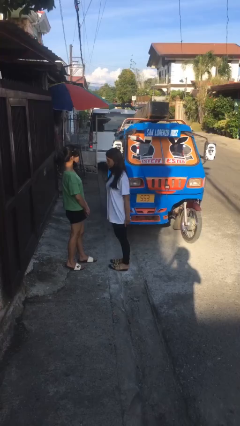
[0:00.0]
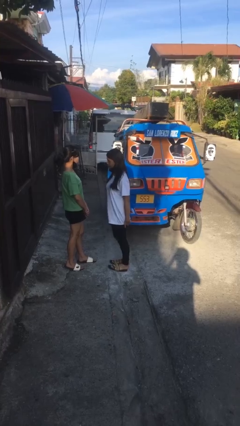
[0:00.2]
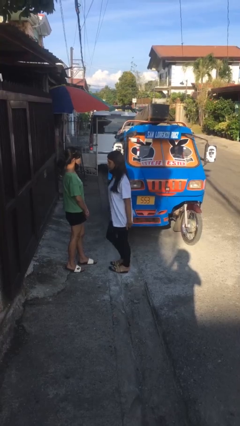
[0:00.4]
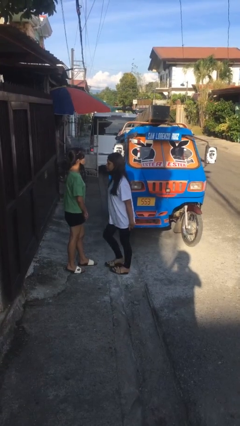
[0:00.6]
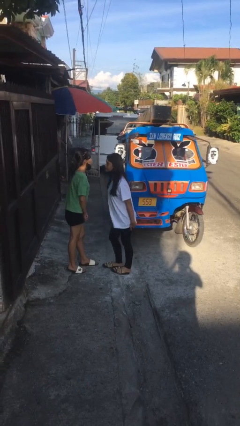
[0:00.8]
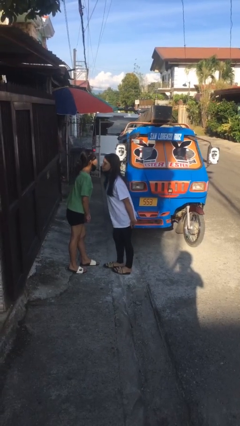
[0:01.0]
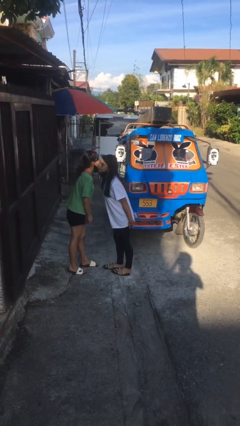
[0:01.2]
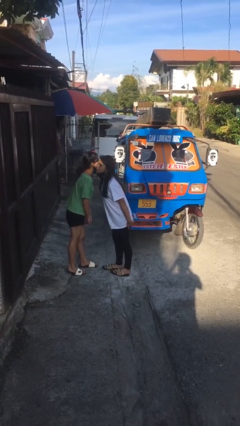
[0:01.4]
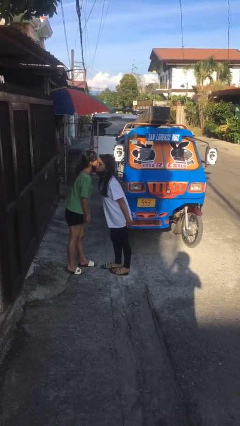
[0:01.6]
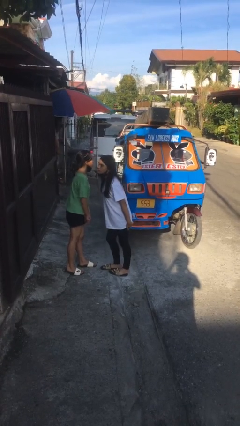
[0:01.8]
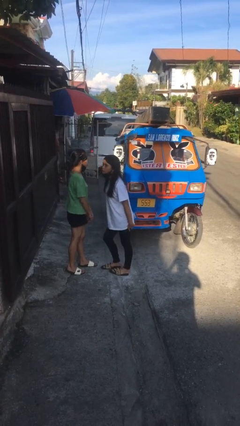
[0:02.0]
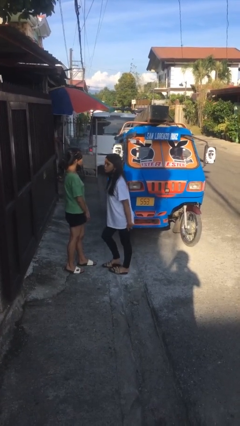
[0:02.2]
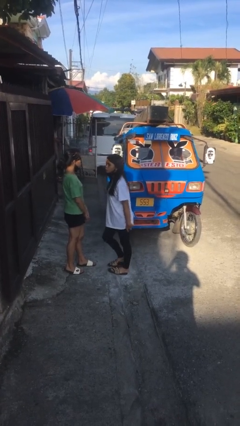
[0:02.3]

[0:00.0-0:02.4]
person kisses cheek of person

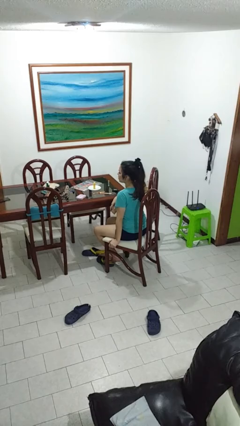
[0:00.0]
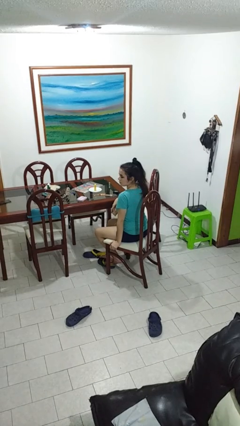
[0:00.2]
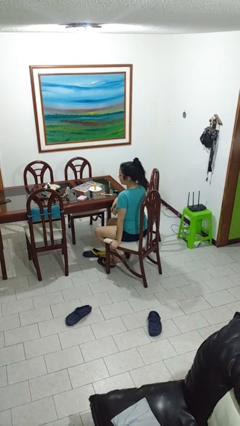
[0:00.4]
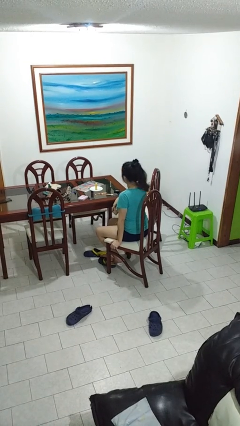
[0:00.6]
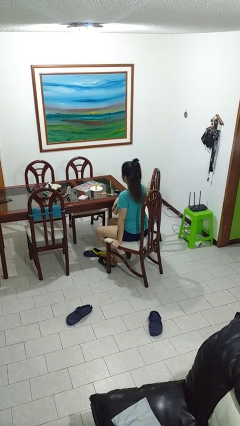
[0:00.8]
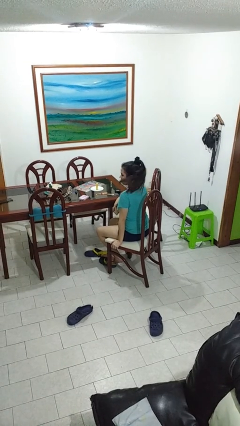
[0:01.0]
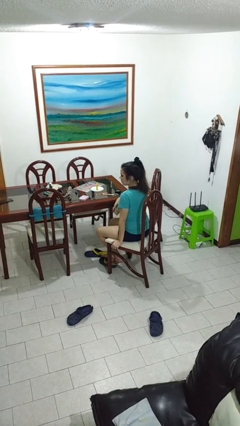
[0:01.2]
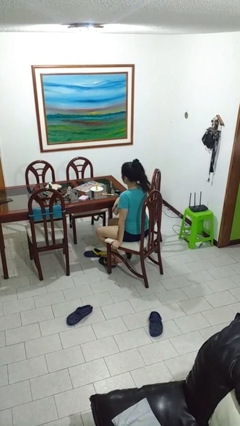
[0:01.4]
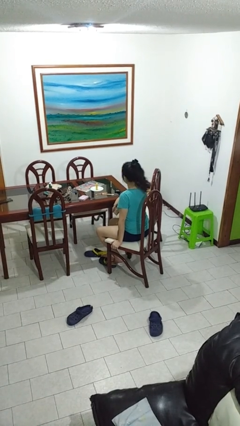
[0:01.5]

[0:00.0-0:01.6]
person shakes head

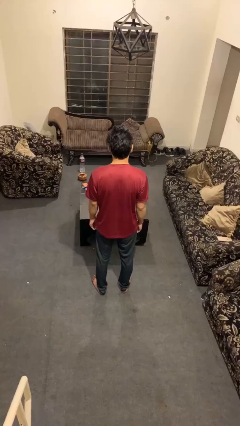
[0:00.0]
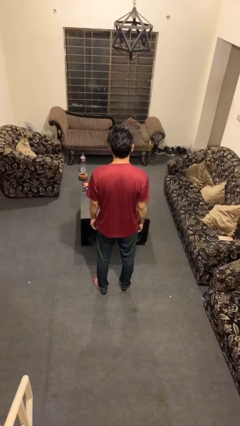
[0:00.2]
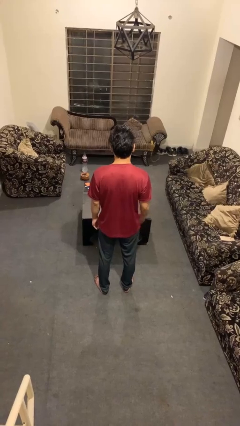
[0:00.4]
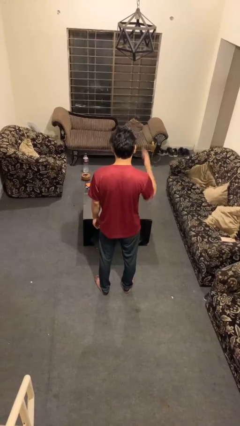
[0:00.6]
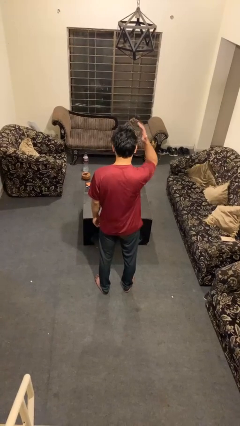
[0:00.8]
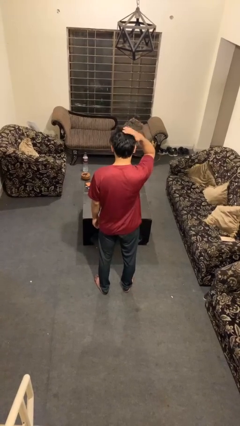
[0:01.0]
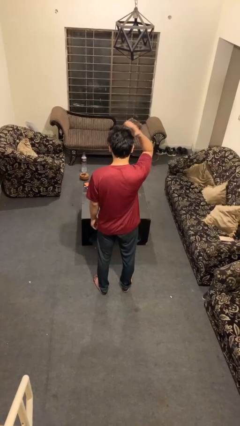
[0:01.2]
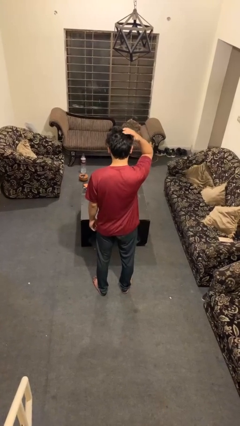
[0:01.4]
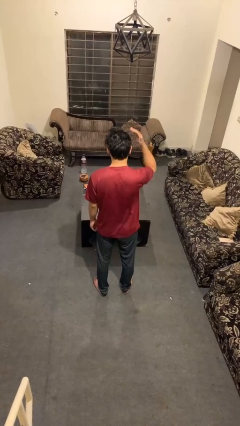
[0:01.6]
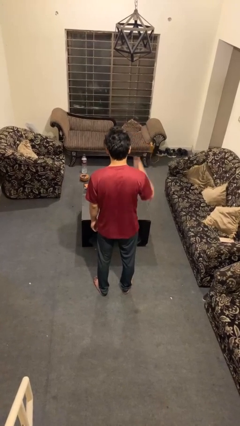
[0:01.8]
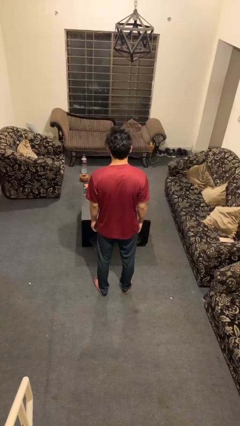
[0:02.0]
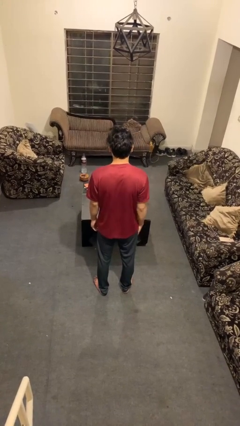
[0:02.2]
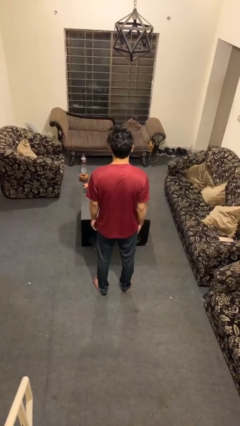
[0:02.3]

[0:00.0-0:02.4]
person pats head

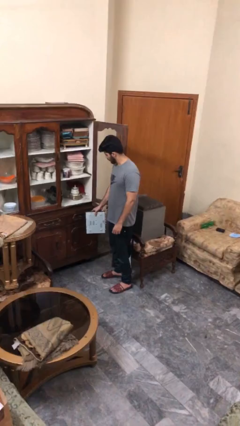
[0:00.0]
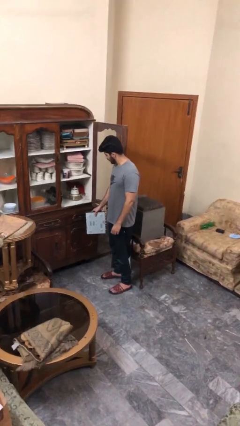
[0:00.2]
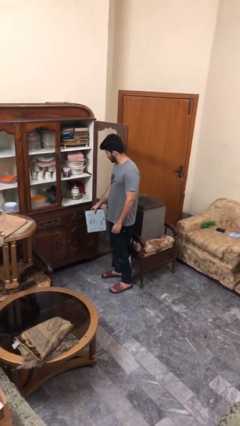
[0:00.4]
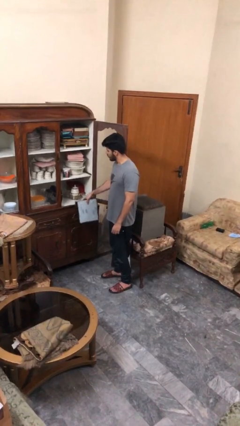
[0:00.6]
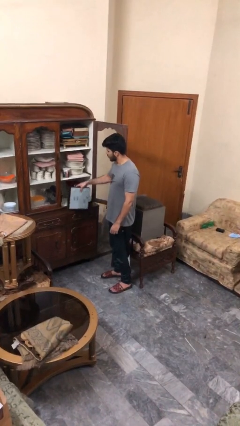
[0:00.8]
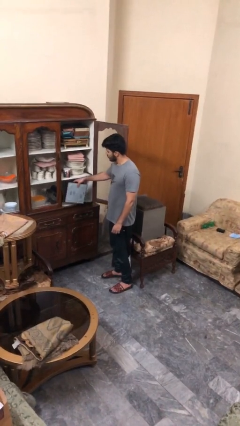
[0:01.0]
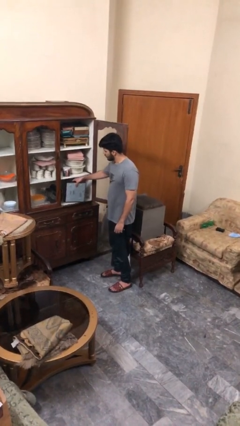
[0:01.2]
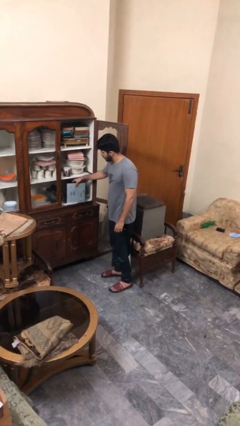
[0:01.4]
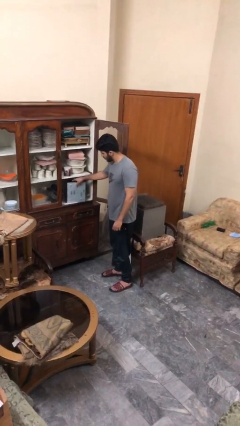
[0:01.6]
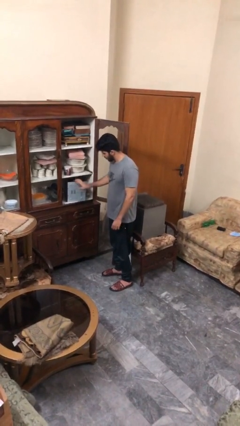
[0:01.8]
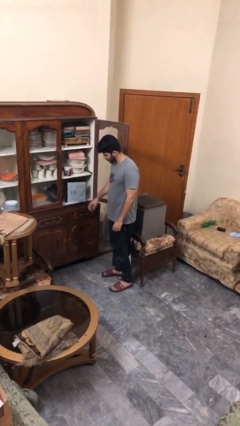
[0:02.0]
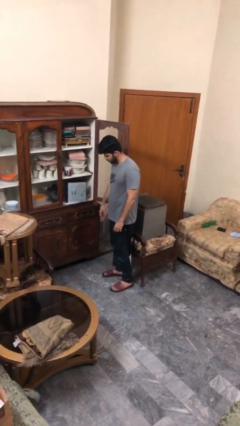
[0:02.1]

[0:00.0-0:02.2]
person puts down object on countertop

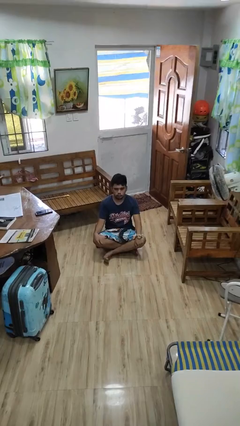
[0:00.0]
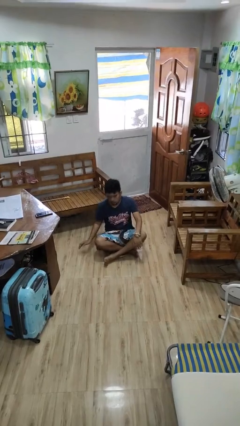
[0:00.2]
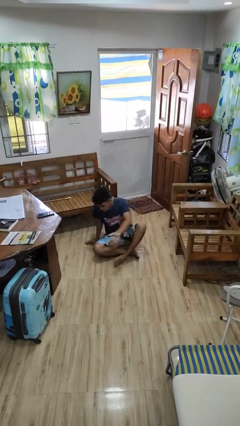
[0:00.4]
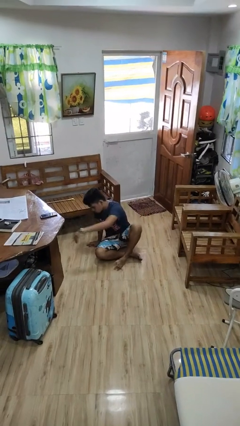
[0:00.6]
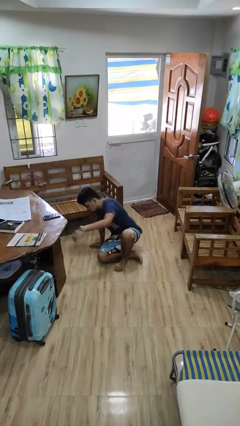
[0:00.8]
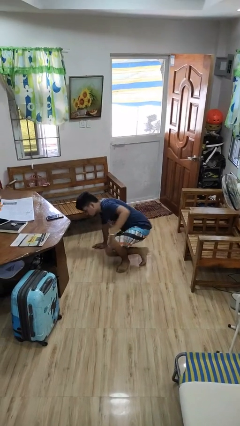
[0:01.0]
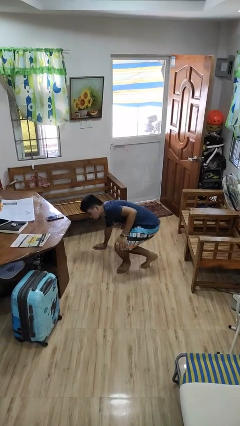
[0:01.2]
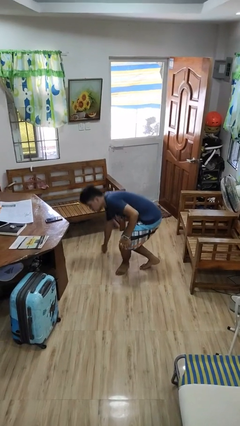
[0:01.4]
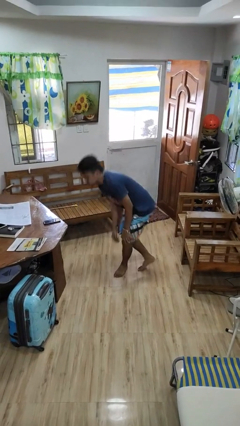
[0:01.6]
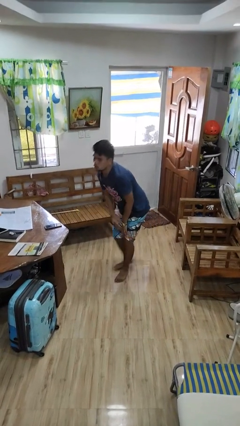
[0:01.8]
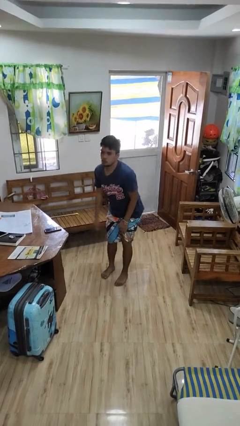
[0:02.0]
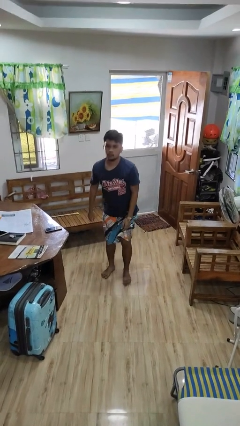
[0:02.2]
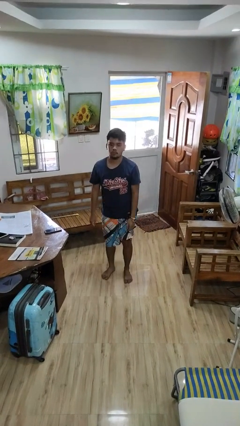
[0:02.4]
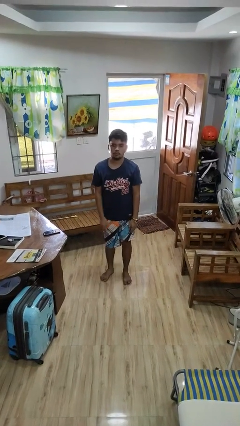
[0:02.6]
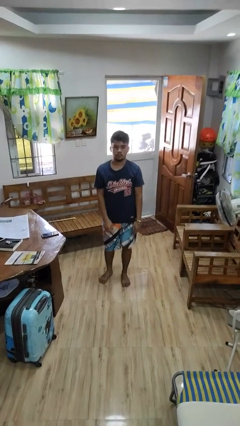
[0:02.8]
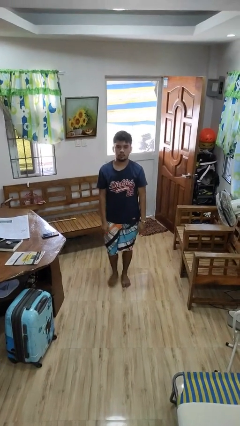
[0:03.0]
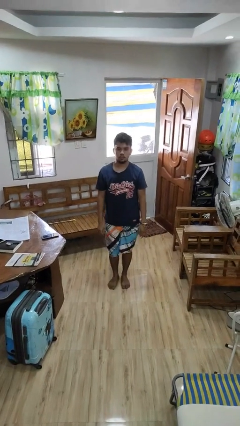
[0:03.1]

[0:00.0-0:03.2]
person stands up from floor

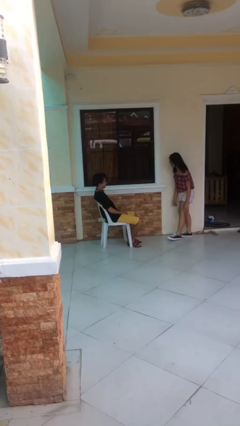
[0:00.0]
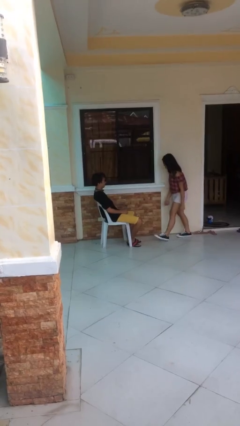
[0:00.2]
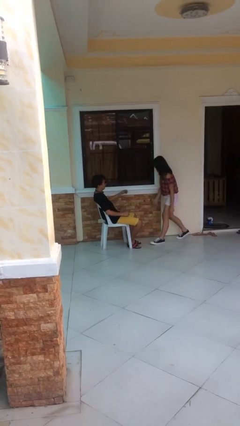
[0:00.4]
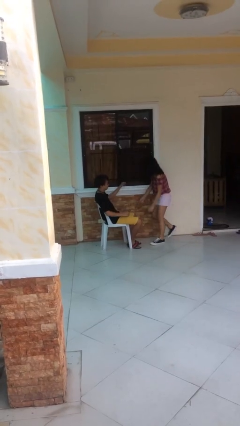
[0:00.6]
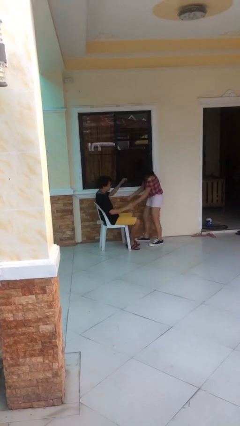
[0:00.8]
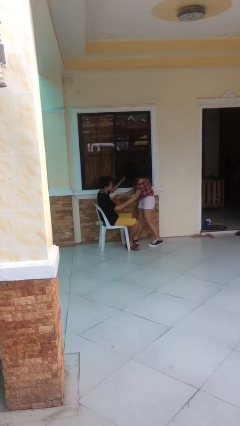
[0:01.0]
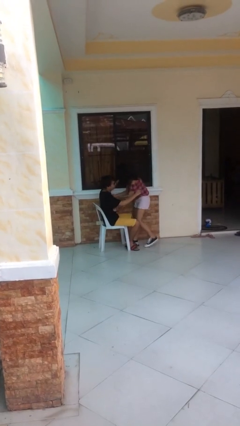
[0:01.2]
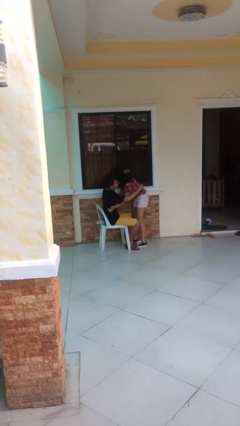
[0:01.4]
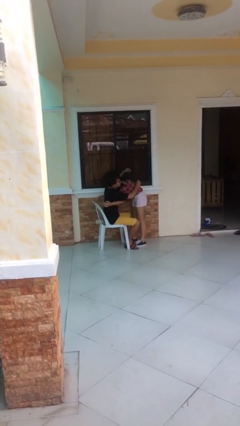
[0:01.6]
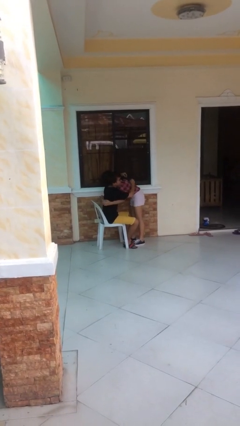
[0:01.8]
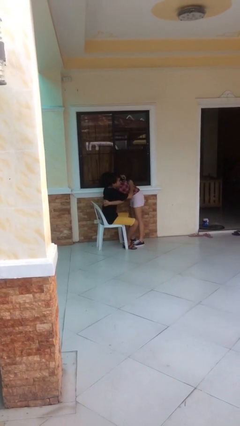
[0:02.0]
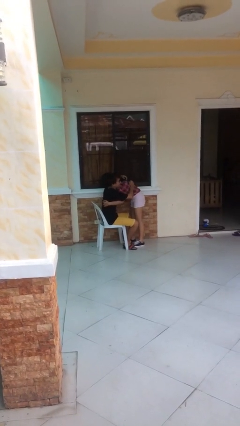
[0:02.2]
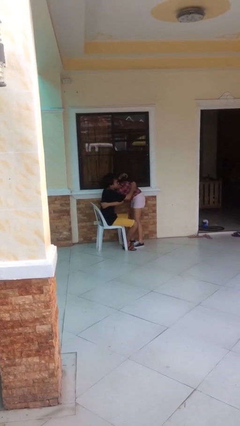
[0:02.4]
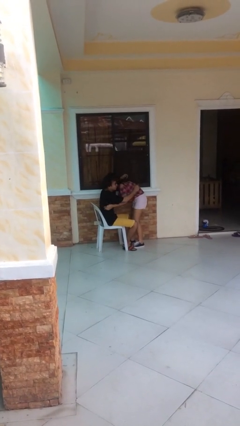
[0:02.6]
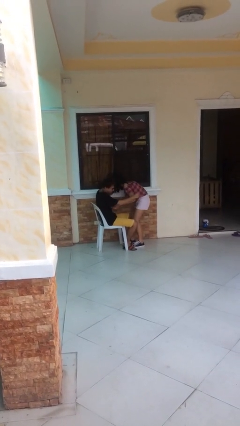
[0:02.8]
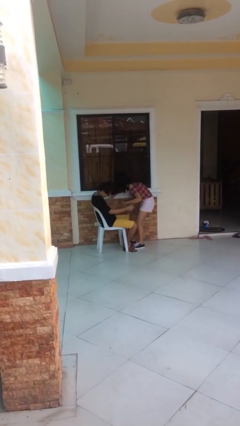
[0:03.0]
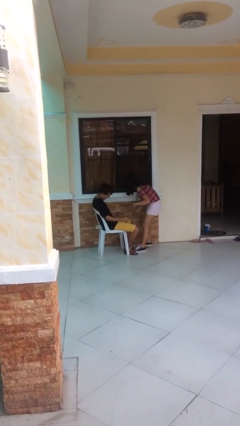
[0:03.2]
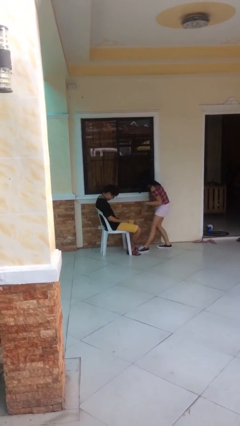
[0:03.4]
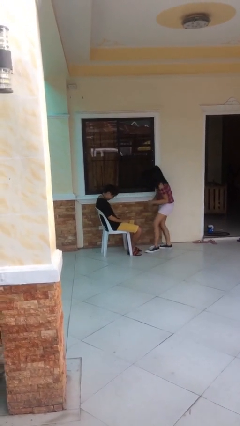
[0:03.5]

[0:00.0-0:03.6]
person embraces person

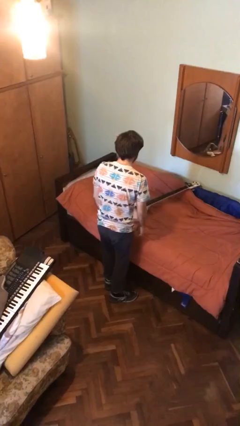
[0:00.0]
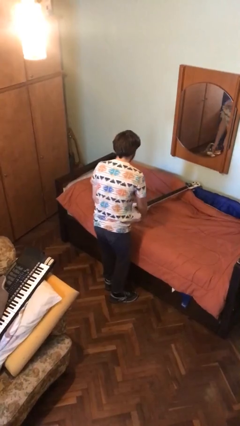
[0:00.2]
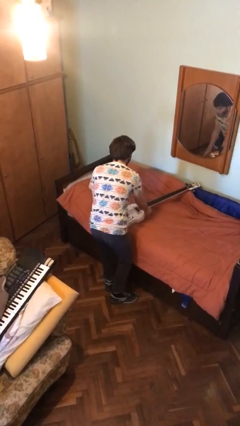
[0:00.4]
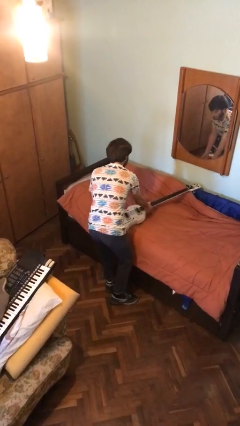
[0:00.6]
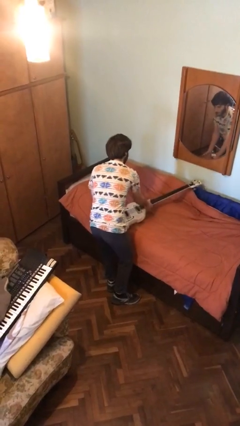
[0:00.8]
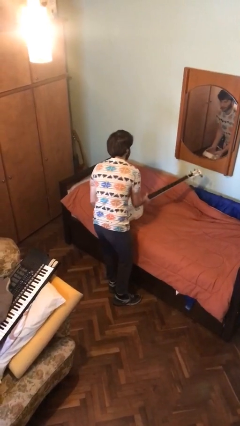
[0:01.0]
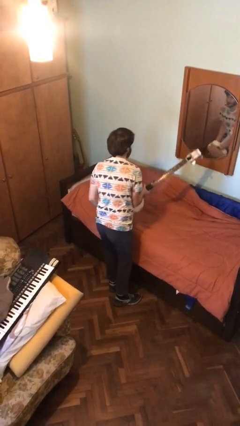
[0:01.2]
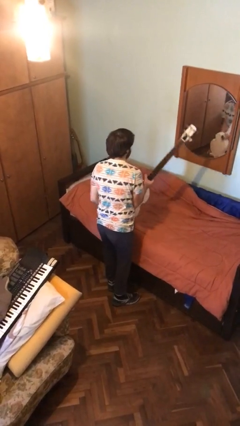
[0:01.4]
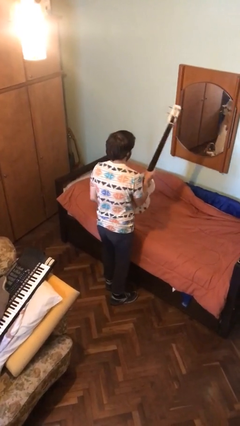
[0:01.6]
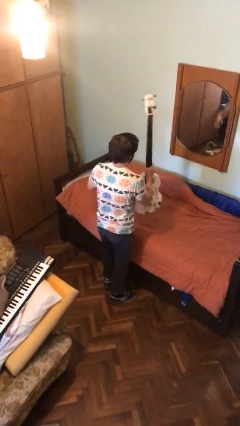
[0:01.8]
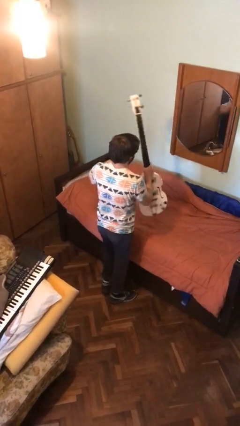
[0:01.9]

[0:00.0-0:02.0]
person picks up object from bed
